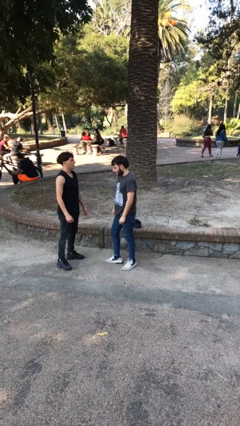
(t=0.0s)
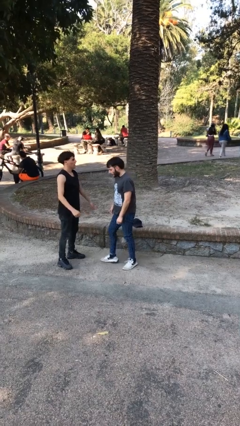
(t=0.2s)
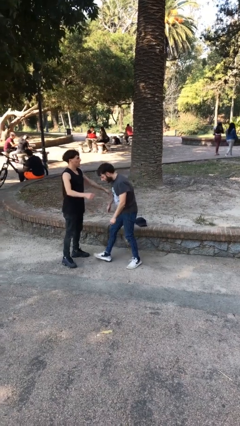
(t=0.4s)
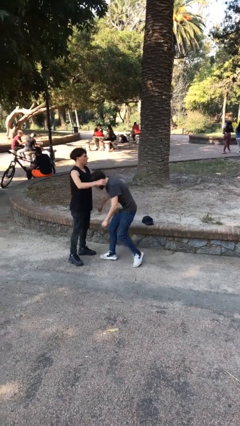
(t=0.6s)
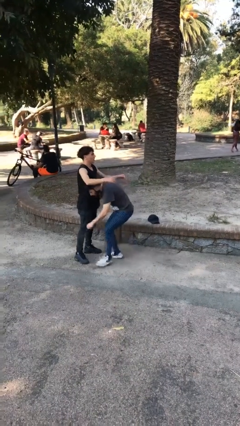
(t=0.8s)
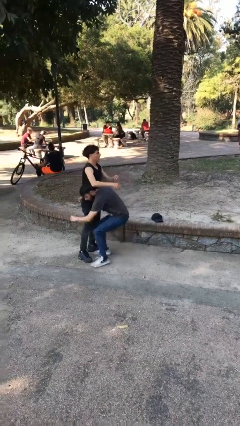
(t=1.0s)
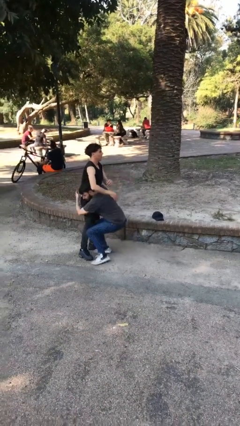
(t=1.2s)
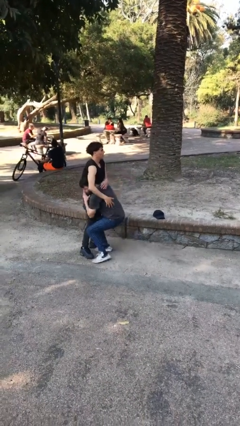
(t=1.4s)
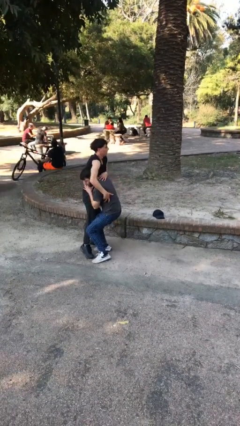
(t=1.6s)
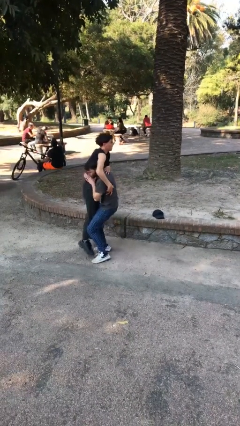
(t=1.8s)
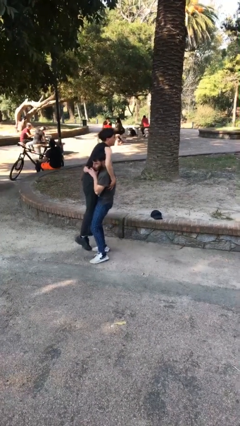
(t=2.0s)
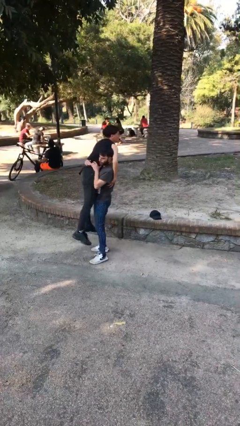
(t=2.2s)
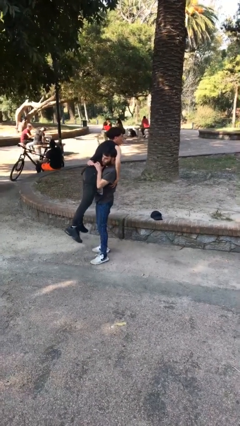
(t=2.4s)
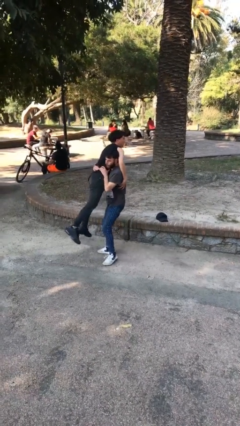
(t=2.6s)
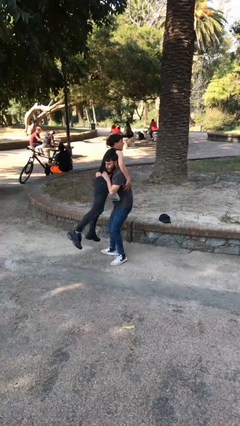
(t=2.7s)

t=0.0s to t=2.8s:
person picks up person

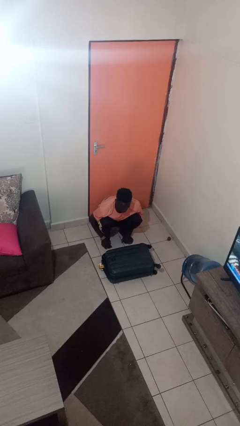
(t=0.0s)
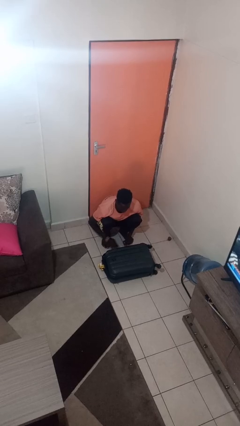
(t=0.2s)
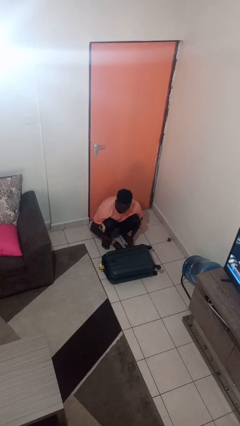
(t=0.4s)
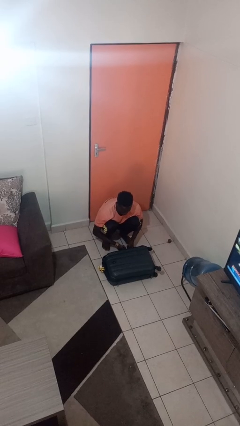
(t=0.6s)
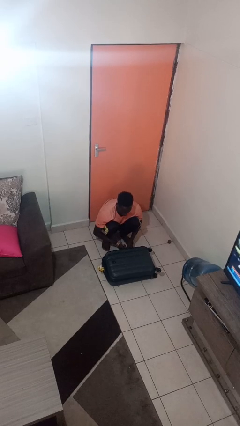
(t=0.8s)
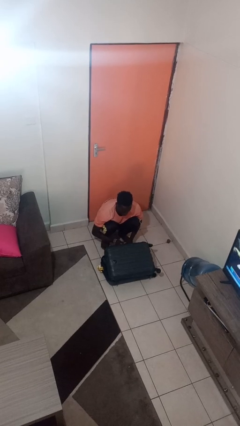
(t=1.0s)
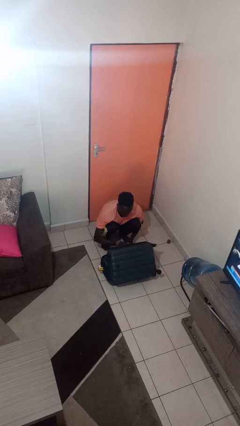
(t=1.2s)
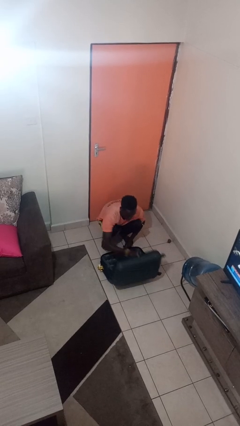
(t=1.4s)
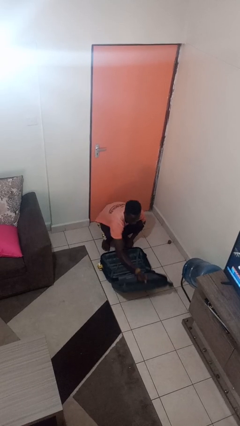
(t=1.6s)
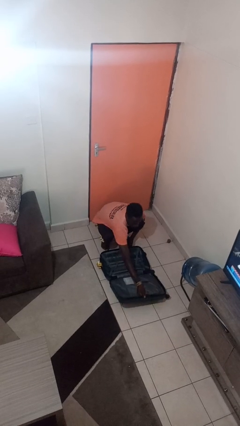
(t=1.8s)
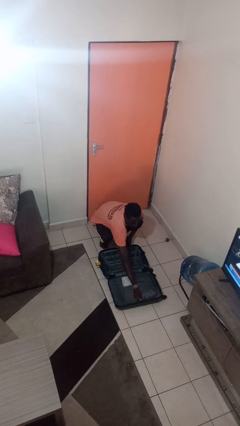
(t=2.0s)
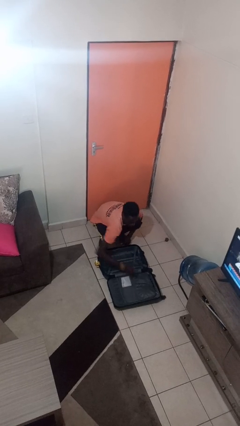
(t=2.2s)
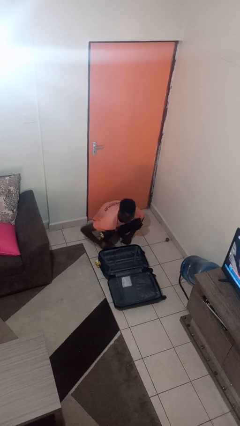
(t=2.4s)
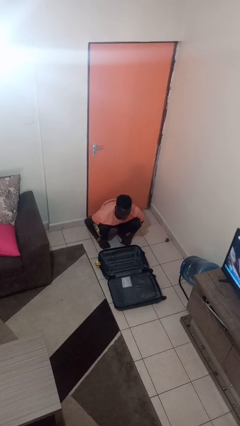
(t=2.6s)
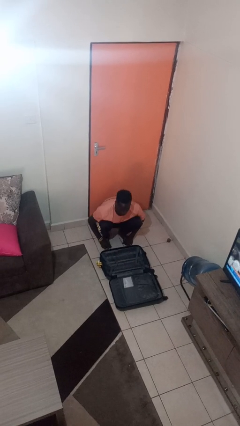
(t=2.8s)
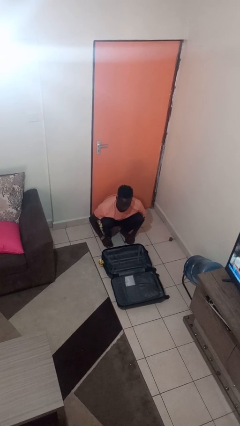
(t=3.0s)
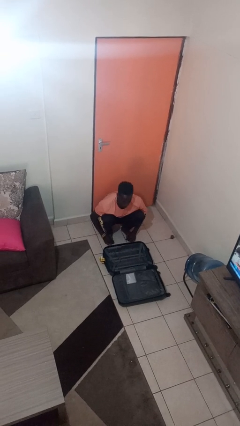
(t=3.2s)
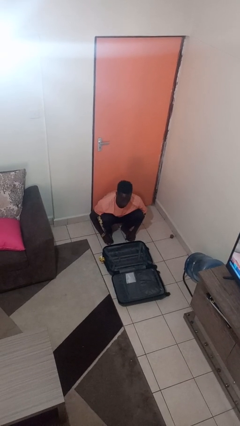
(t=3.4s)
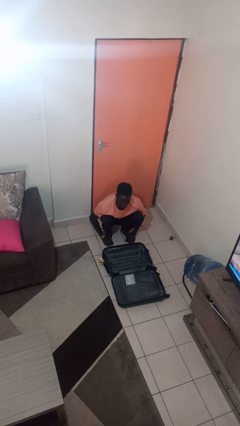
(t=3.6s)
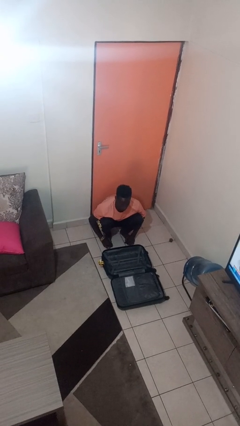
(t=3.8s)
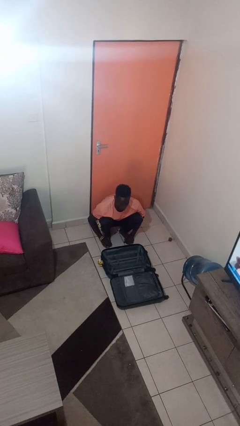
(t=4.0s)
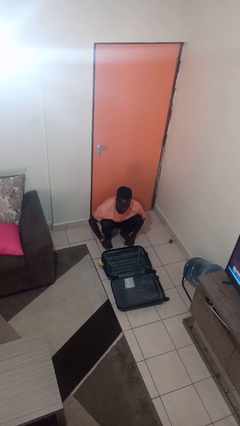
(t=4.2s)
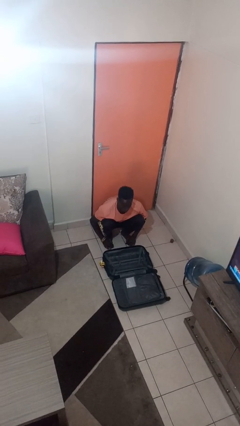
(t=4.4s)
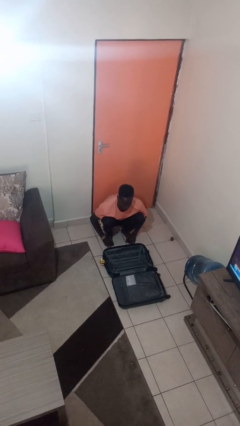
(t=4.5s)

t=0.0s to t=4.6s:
person opens suitcase

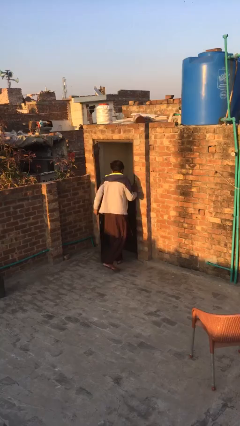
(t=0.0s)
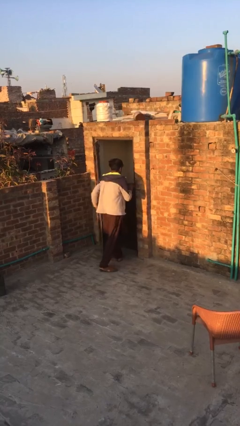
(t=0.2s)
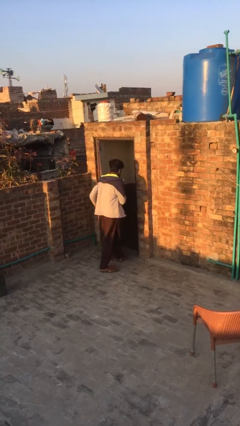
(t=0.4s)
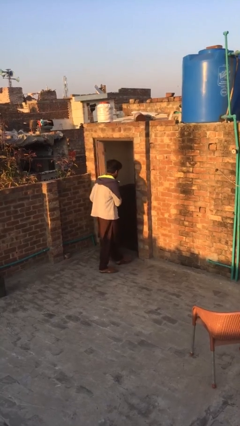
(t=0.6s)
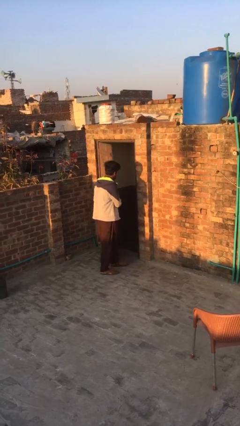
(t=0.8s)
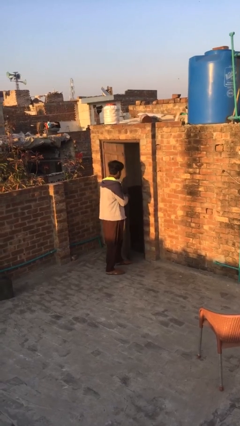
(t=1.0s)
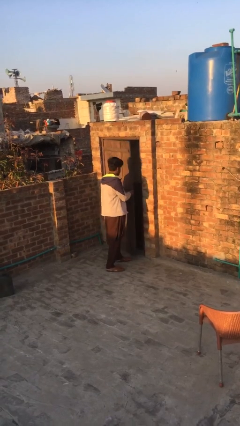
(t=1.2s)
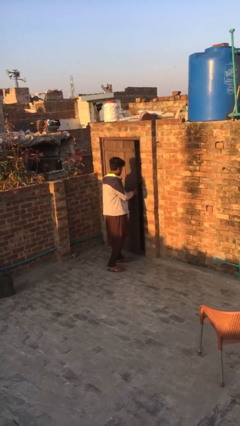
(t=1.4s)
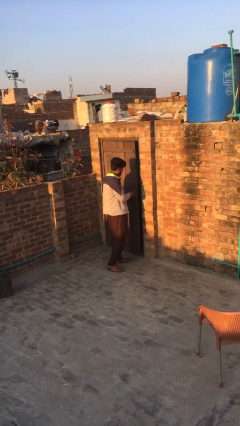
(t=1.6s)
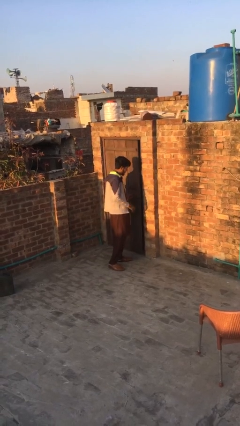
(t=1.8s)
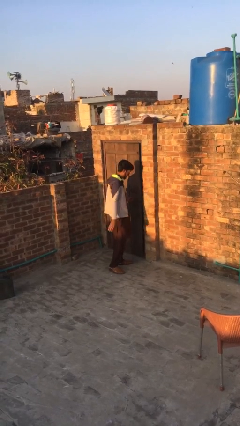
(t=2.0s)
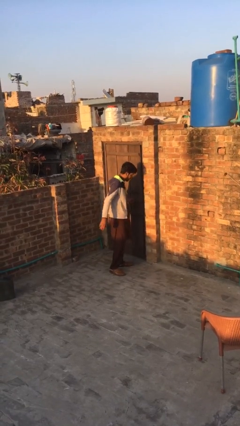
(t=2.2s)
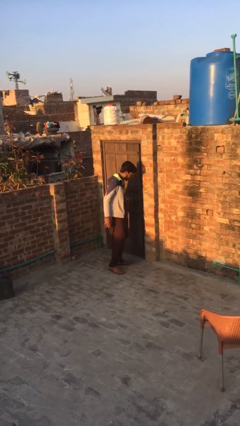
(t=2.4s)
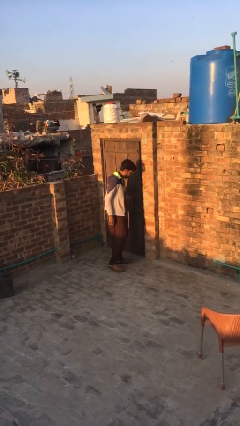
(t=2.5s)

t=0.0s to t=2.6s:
person closes facility door

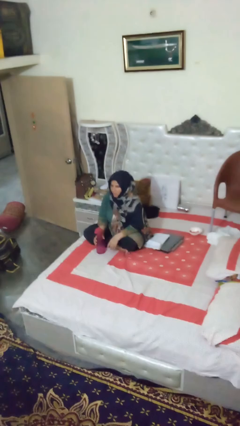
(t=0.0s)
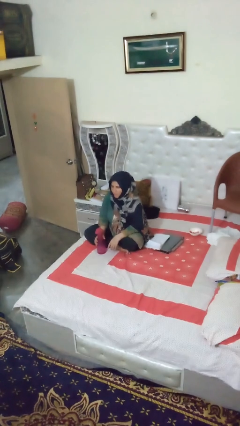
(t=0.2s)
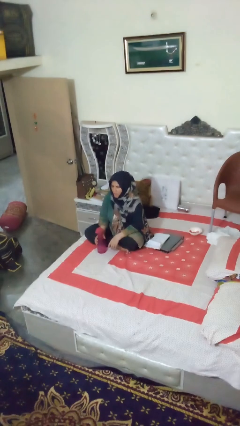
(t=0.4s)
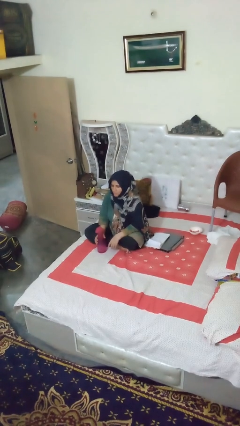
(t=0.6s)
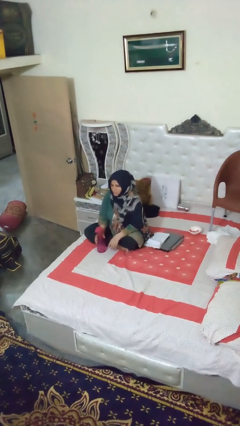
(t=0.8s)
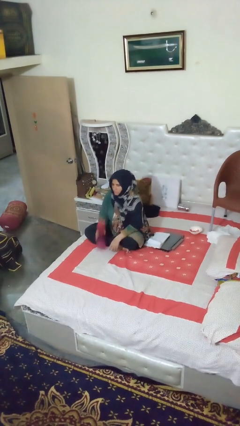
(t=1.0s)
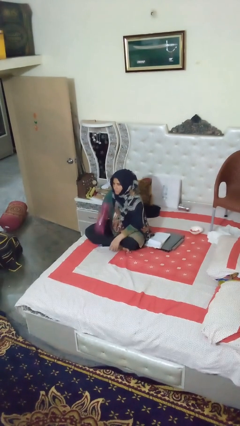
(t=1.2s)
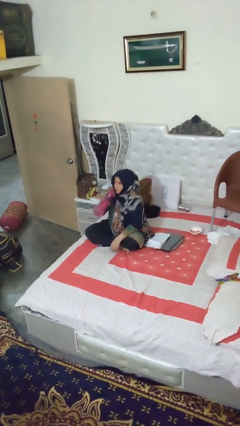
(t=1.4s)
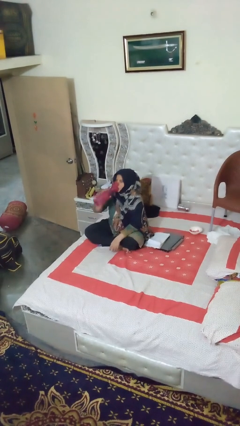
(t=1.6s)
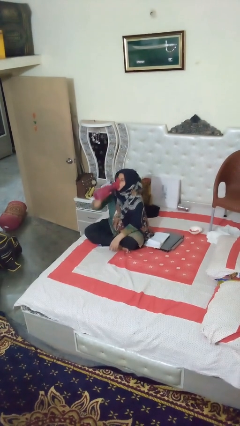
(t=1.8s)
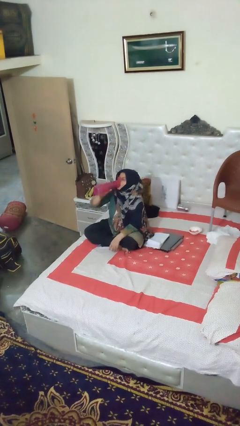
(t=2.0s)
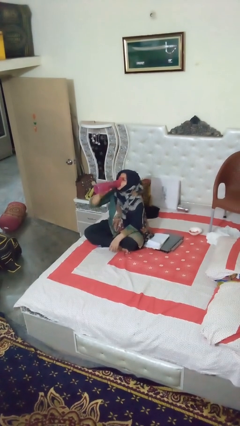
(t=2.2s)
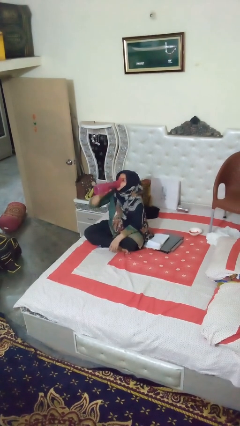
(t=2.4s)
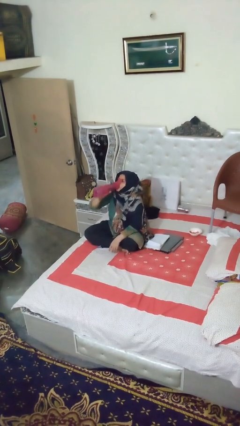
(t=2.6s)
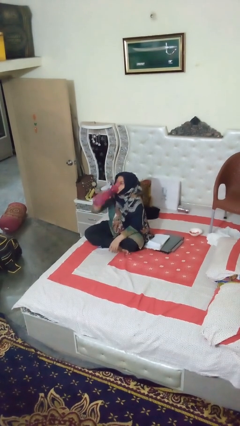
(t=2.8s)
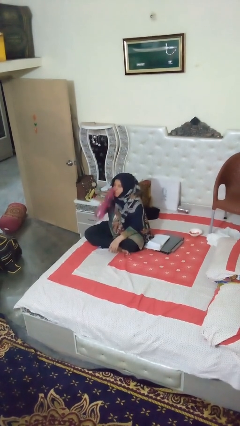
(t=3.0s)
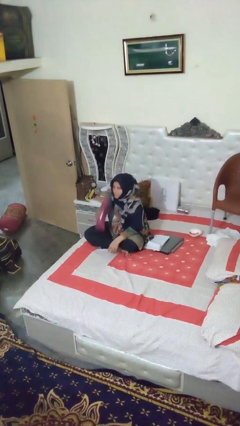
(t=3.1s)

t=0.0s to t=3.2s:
person drinks from bottle

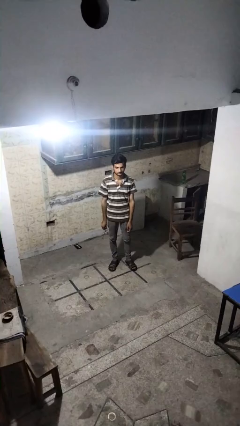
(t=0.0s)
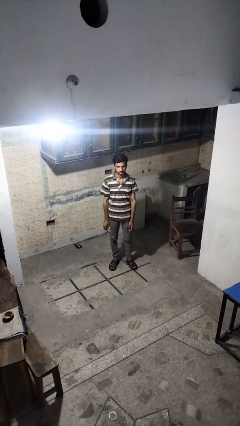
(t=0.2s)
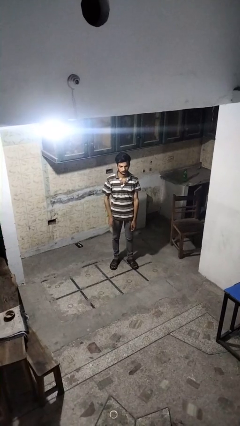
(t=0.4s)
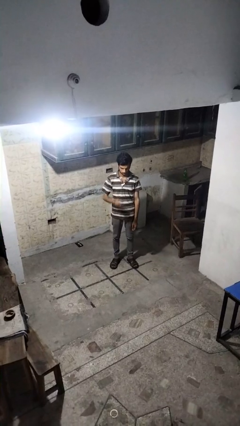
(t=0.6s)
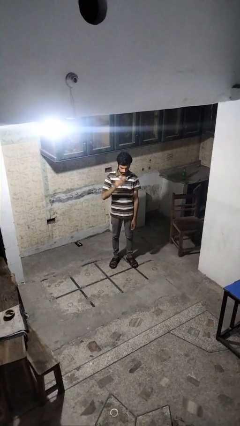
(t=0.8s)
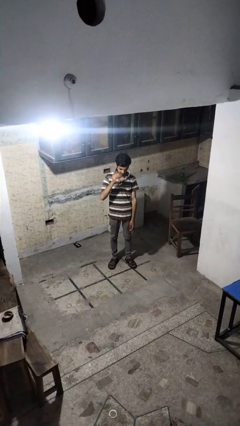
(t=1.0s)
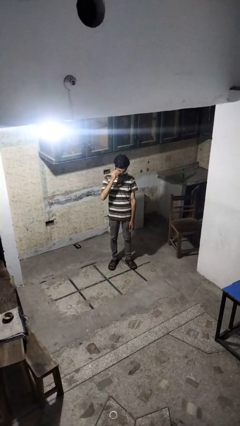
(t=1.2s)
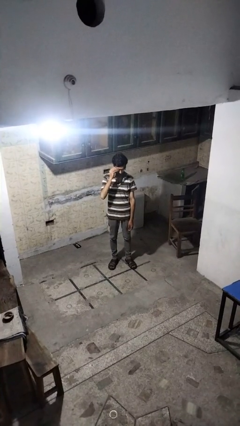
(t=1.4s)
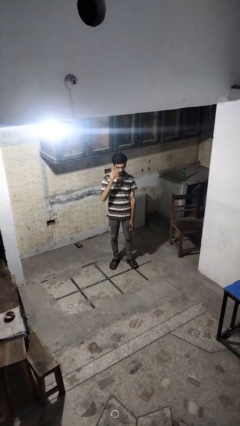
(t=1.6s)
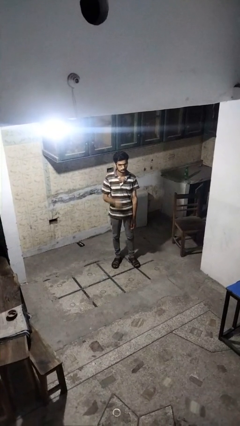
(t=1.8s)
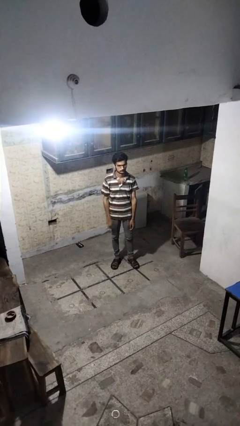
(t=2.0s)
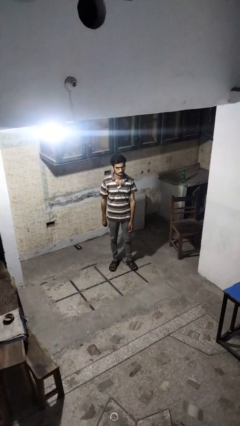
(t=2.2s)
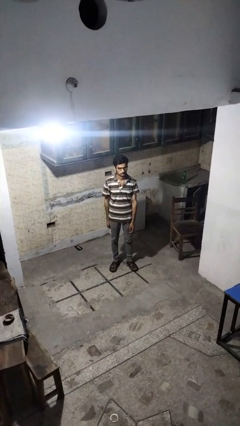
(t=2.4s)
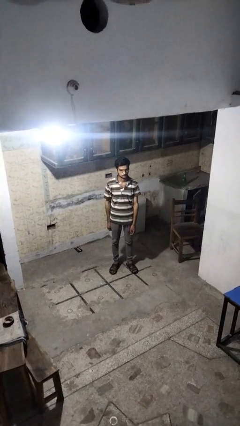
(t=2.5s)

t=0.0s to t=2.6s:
person puts on glasses

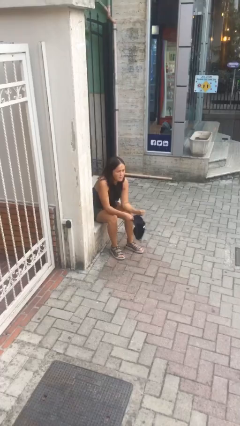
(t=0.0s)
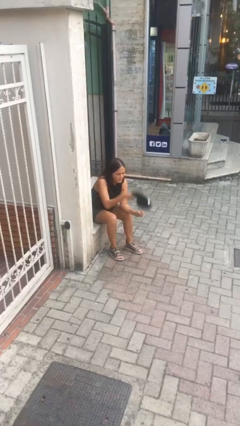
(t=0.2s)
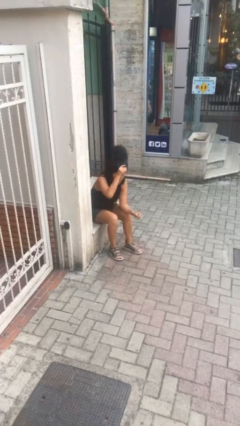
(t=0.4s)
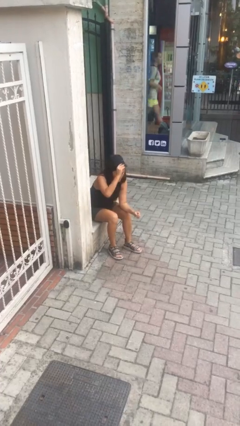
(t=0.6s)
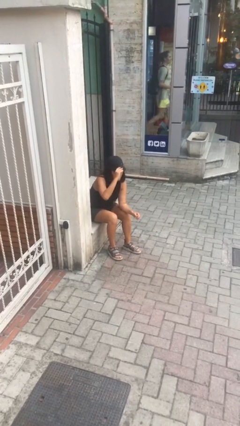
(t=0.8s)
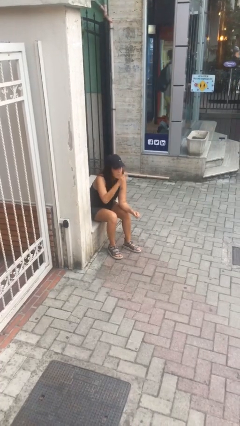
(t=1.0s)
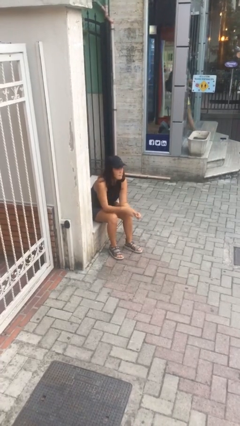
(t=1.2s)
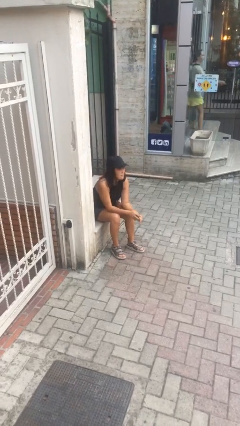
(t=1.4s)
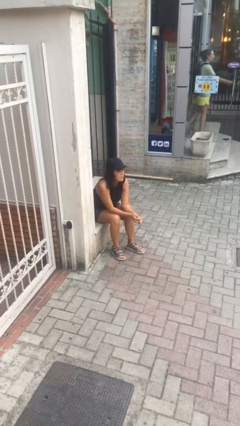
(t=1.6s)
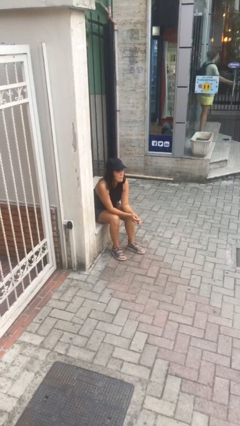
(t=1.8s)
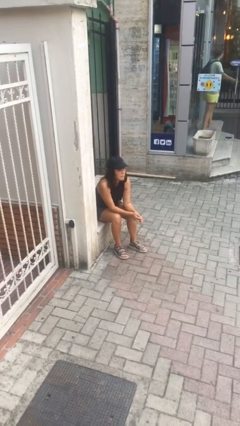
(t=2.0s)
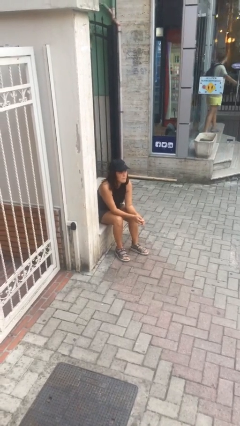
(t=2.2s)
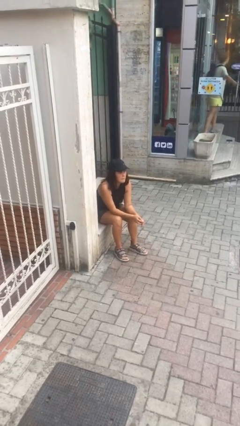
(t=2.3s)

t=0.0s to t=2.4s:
person puts on hat
